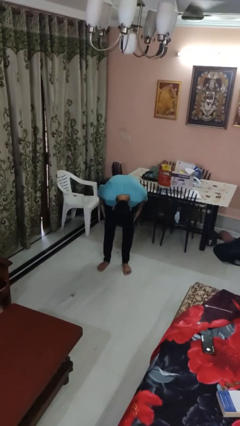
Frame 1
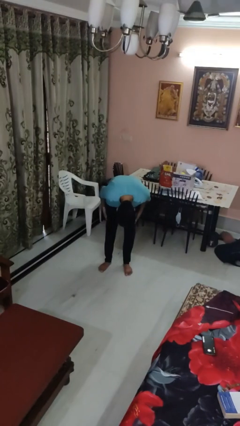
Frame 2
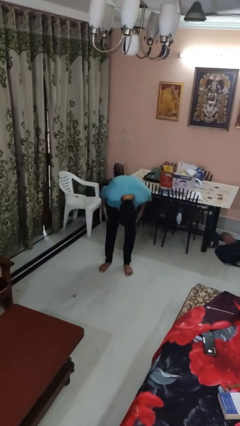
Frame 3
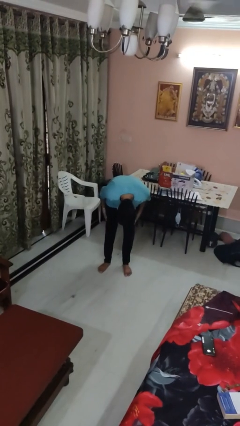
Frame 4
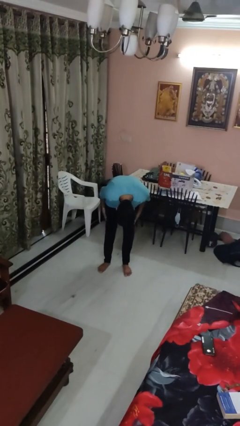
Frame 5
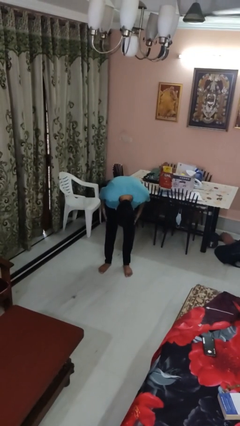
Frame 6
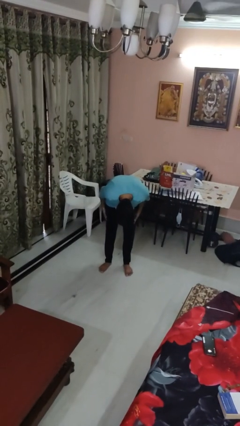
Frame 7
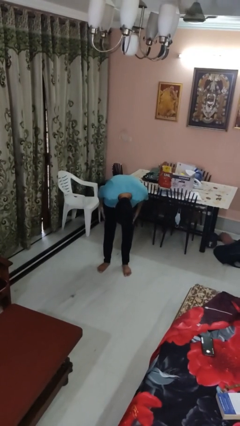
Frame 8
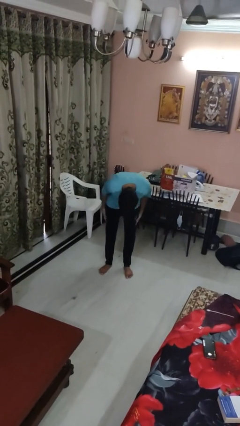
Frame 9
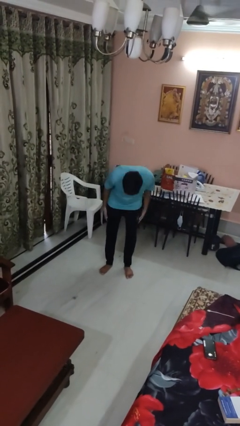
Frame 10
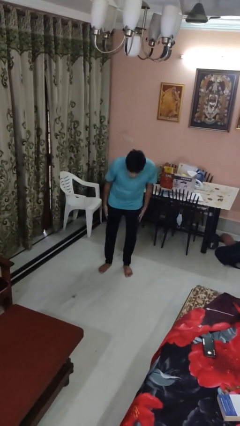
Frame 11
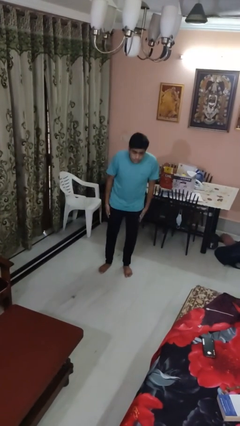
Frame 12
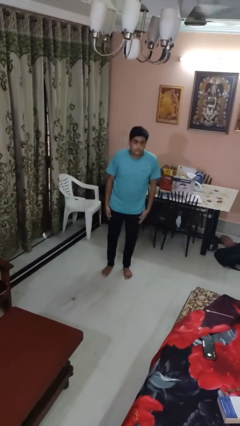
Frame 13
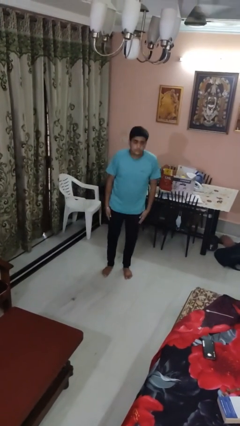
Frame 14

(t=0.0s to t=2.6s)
person bows

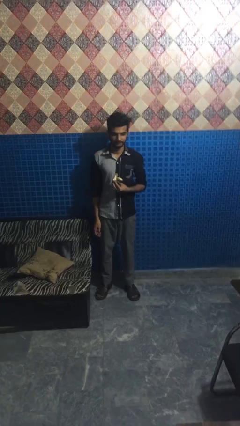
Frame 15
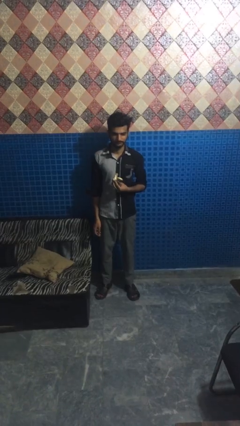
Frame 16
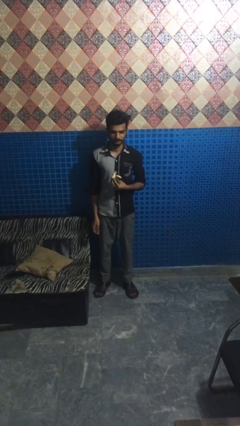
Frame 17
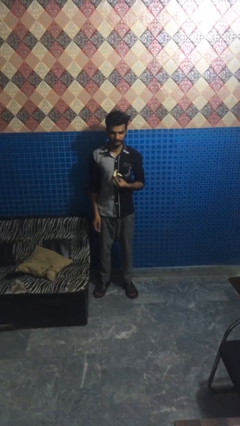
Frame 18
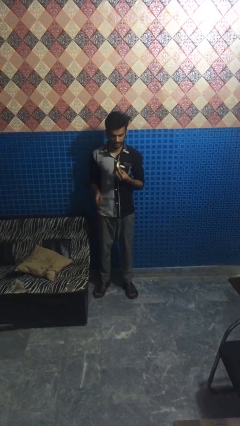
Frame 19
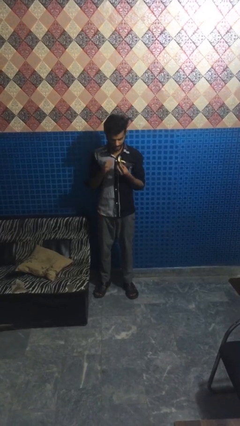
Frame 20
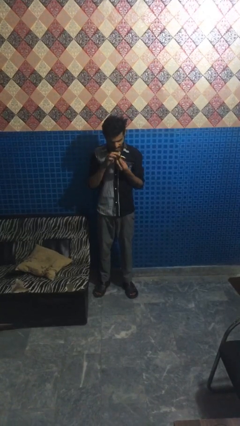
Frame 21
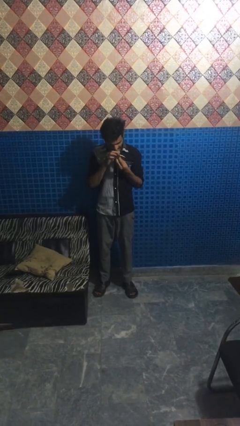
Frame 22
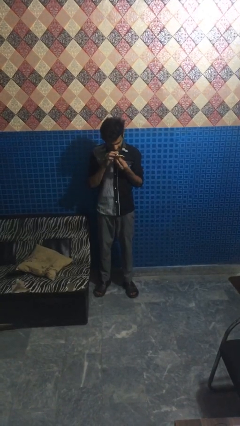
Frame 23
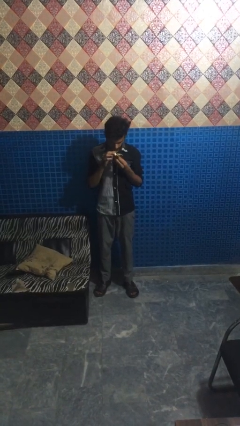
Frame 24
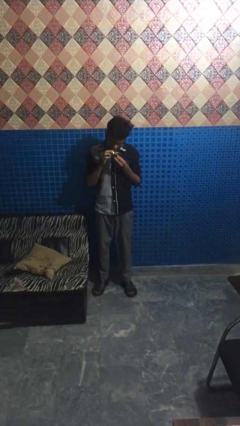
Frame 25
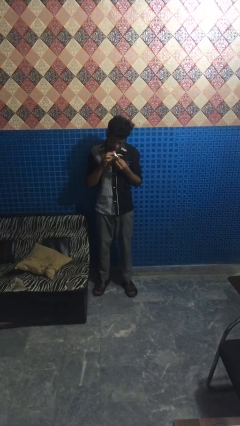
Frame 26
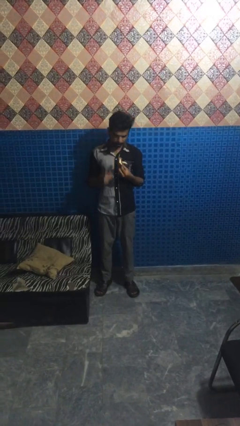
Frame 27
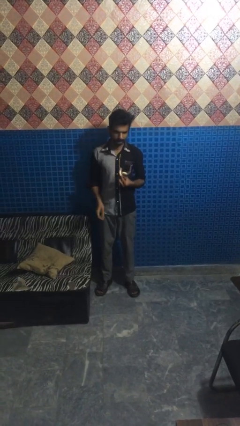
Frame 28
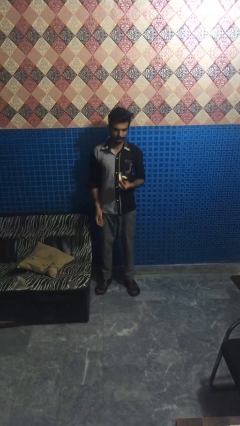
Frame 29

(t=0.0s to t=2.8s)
person eats banana

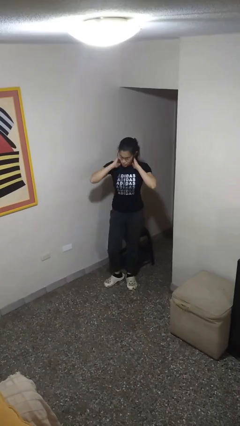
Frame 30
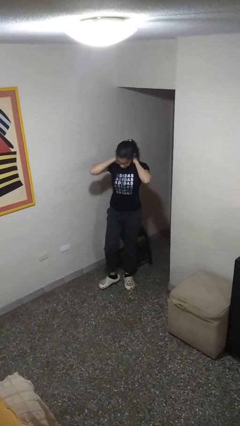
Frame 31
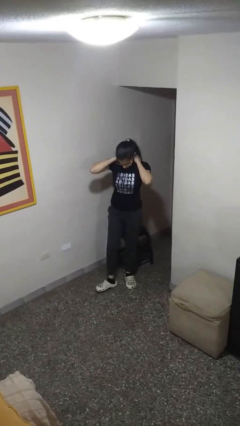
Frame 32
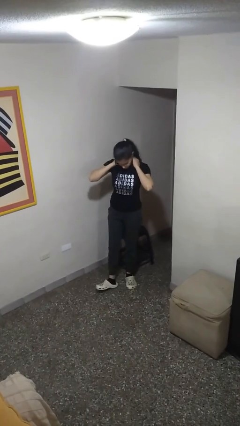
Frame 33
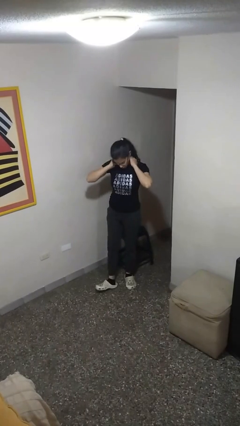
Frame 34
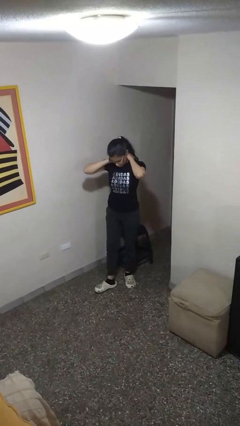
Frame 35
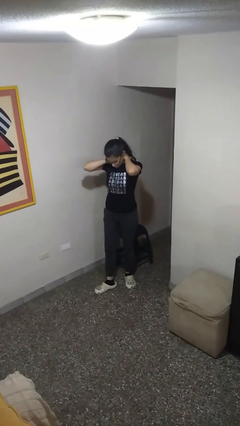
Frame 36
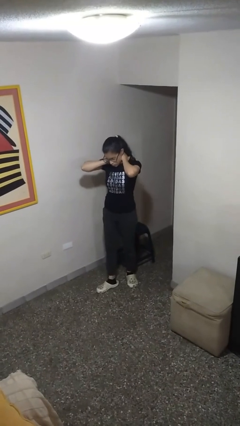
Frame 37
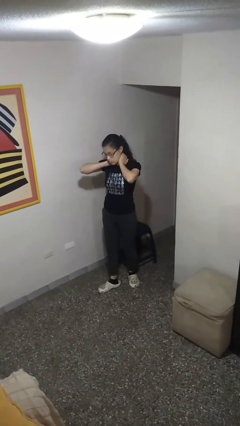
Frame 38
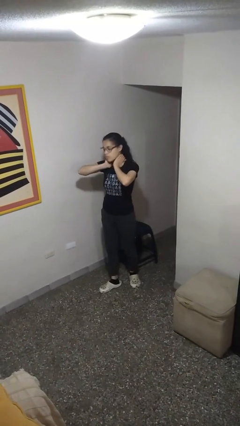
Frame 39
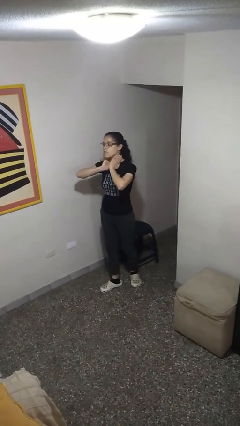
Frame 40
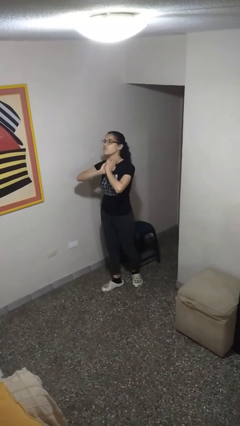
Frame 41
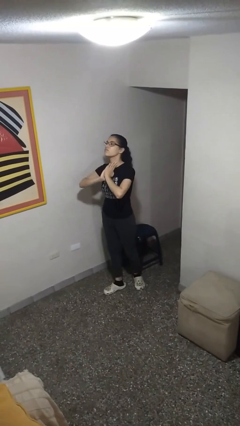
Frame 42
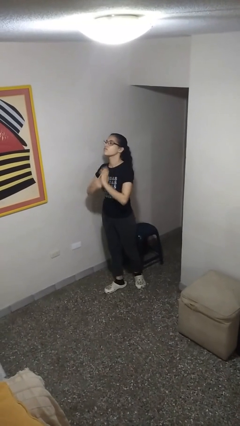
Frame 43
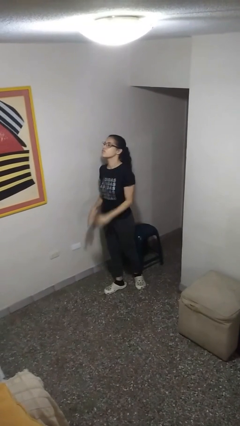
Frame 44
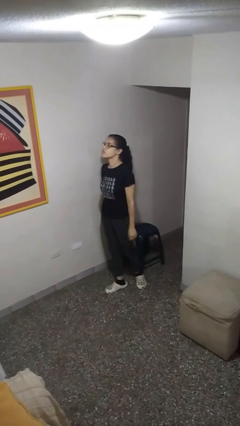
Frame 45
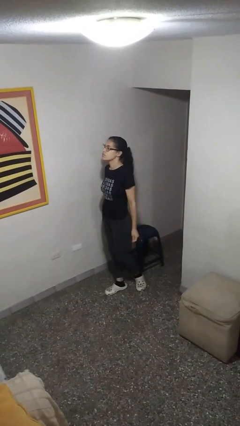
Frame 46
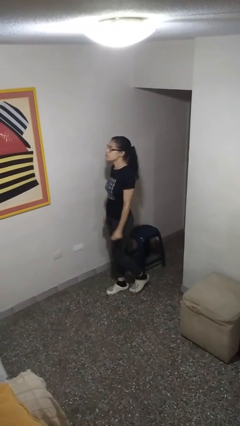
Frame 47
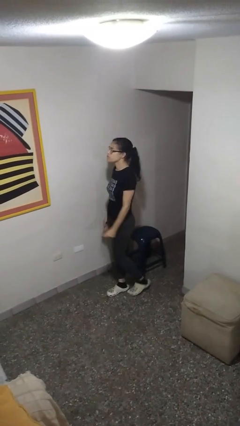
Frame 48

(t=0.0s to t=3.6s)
person rubs neck

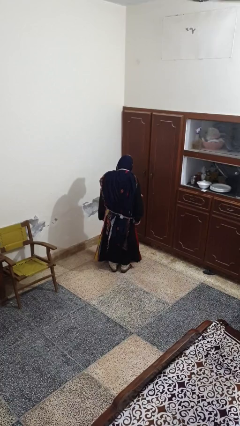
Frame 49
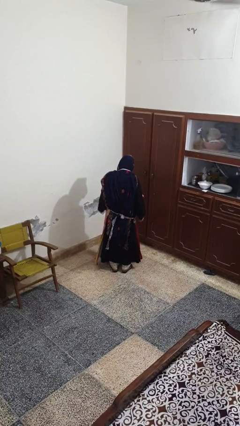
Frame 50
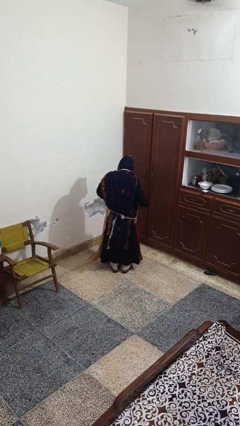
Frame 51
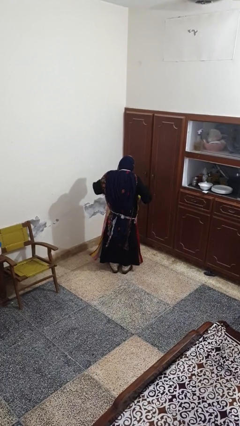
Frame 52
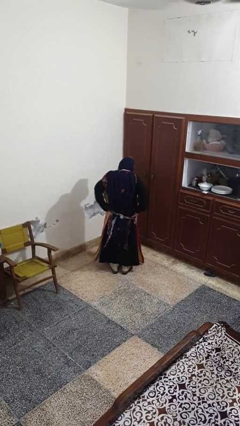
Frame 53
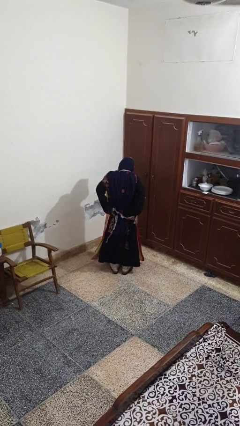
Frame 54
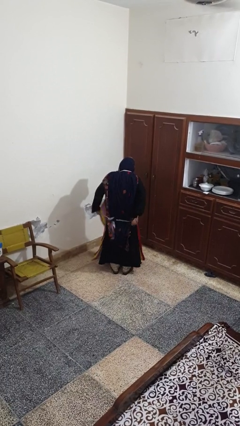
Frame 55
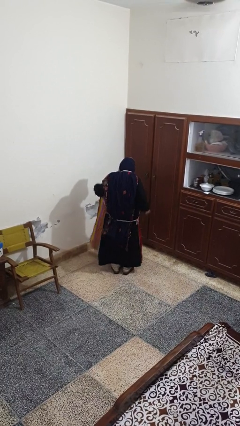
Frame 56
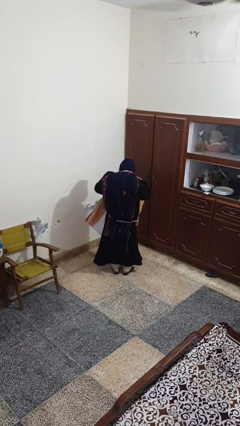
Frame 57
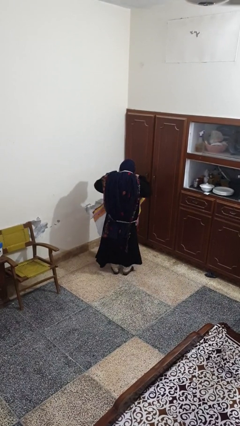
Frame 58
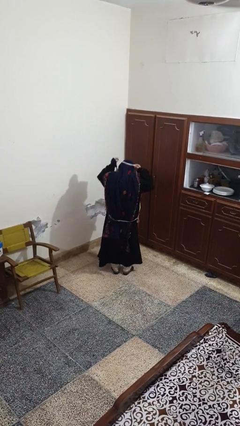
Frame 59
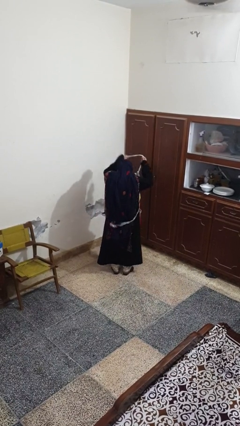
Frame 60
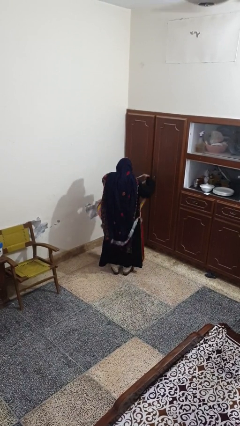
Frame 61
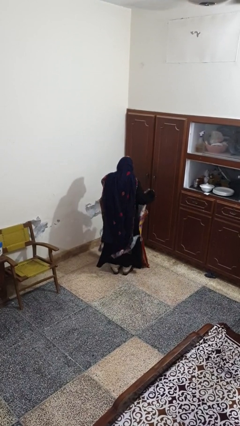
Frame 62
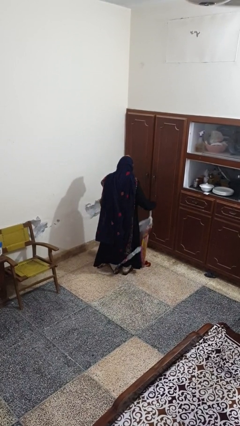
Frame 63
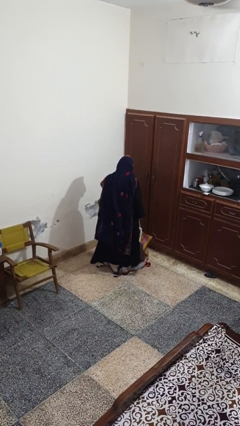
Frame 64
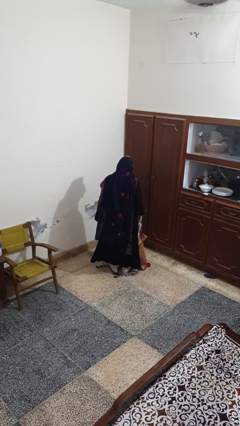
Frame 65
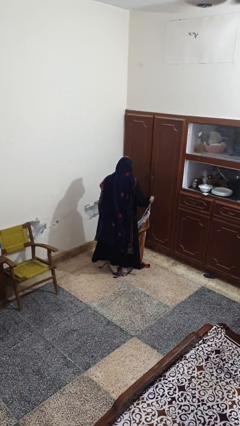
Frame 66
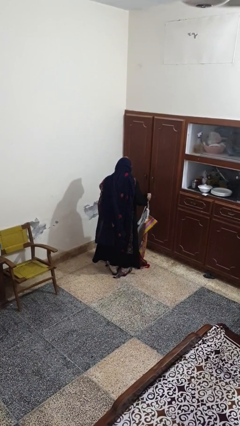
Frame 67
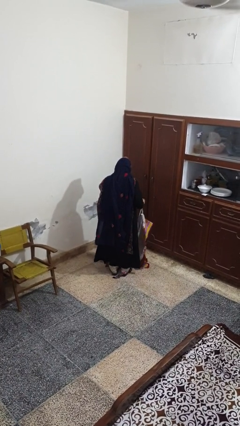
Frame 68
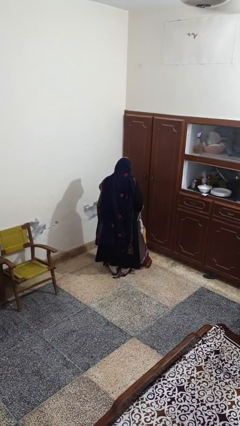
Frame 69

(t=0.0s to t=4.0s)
person takes off apron

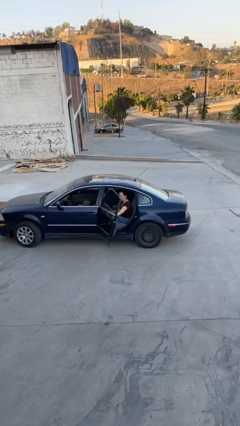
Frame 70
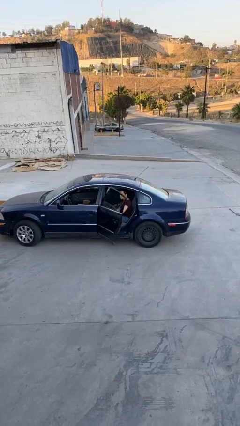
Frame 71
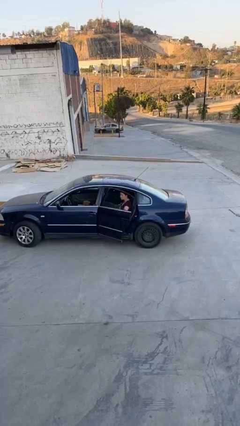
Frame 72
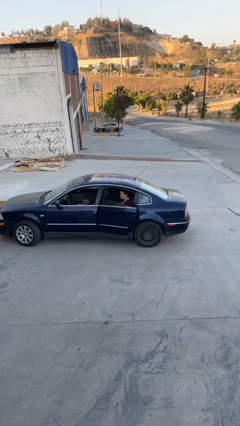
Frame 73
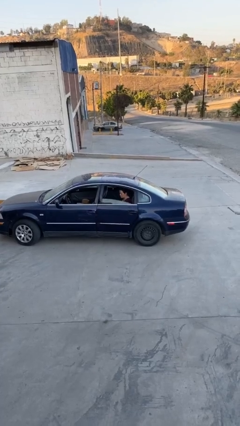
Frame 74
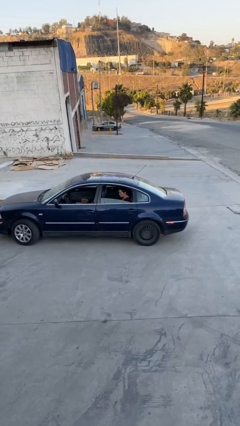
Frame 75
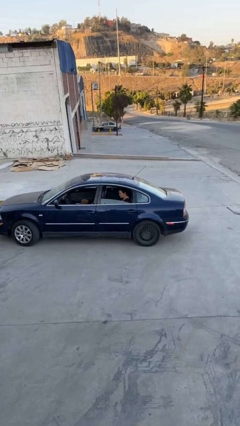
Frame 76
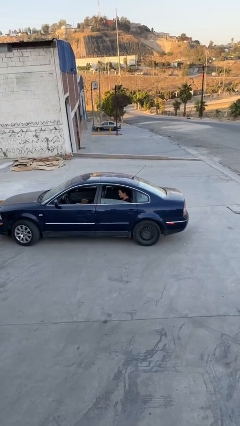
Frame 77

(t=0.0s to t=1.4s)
person closes car door

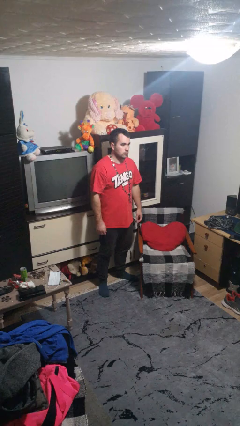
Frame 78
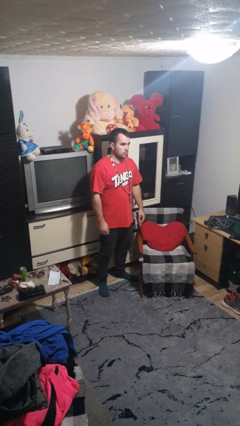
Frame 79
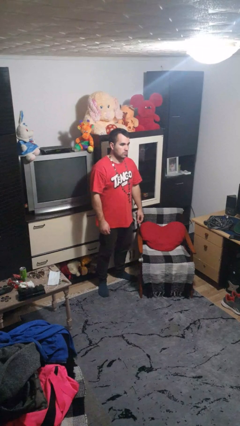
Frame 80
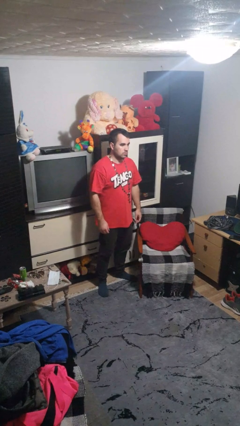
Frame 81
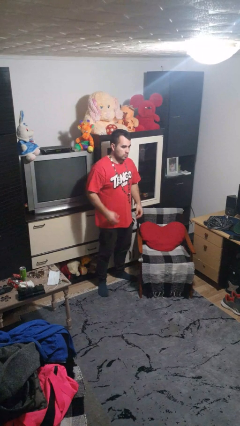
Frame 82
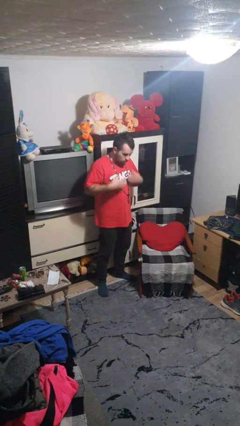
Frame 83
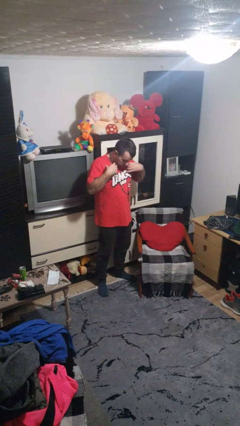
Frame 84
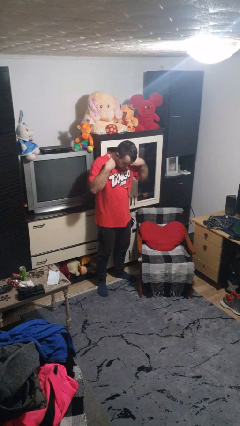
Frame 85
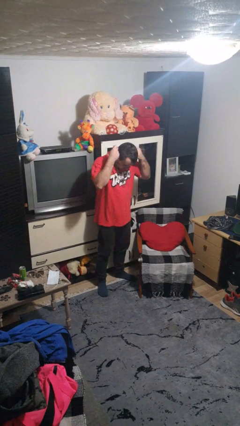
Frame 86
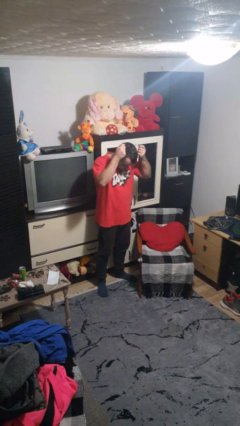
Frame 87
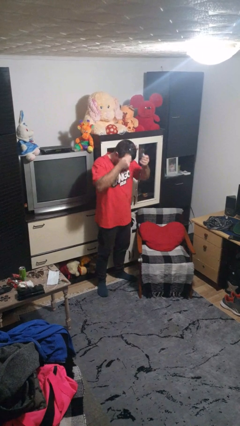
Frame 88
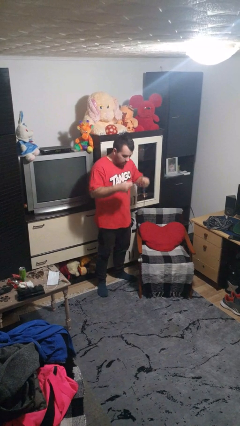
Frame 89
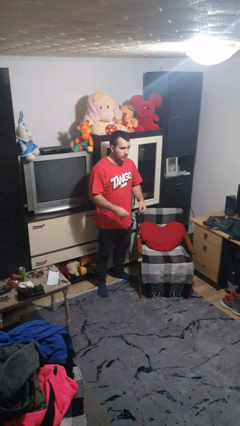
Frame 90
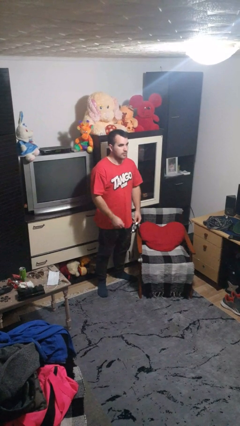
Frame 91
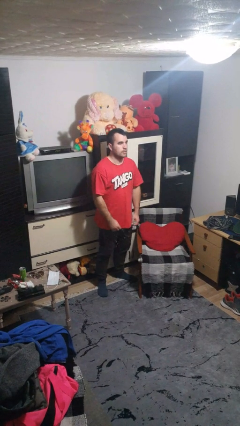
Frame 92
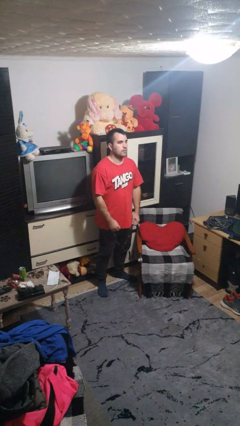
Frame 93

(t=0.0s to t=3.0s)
person takes off necklace
